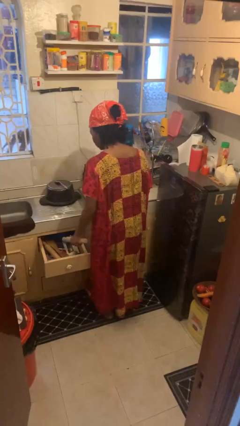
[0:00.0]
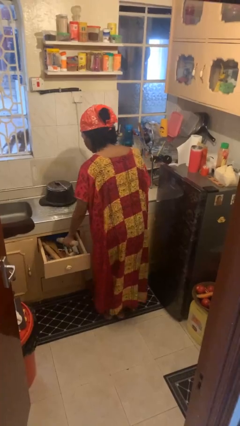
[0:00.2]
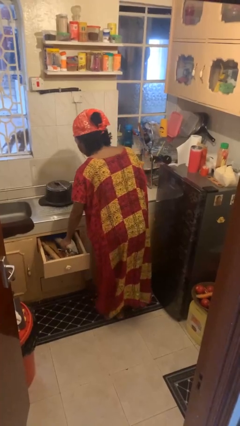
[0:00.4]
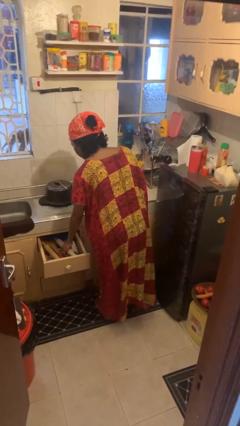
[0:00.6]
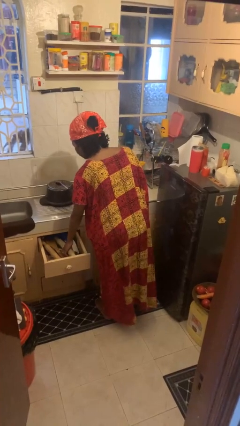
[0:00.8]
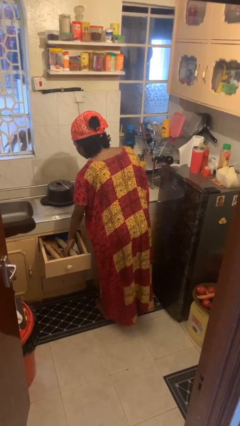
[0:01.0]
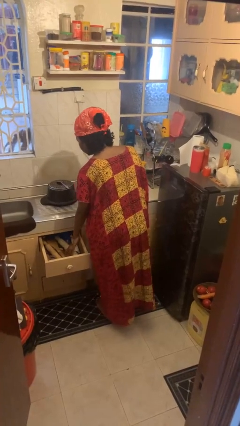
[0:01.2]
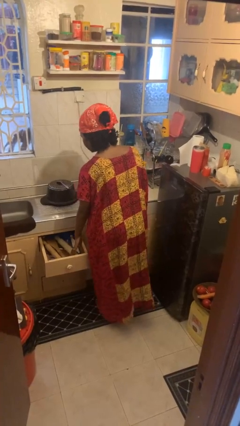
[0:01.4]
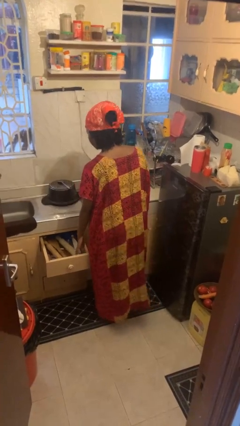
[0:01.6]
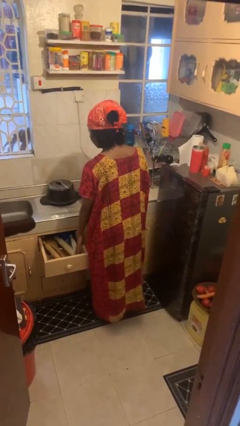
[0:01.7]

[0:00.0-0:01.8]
person puts object into kitchen drawer

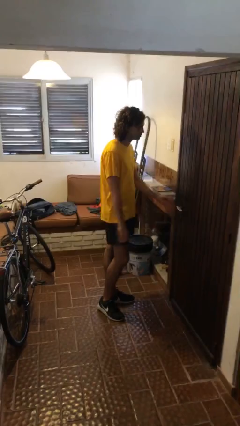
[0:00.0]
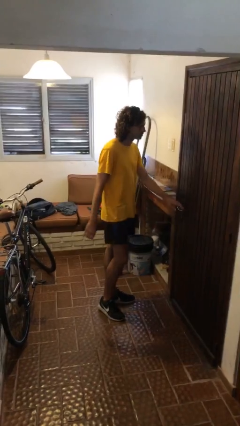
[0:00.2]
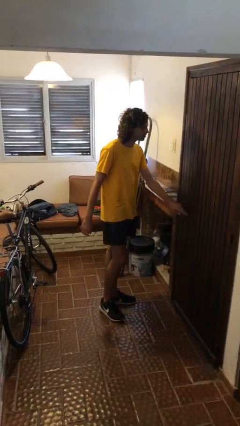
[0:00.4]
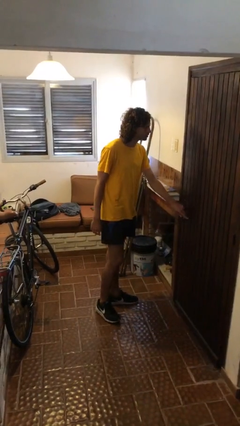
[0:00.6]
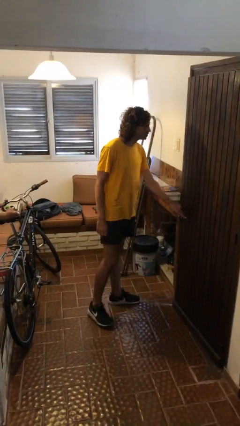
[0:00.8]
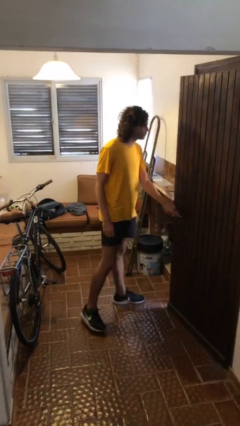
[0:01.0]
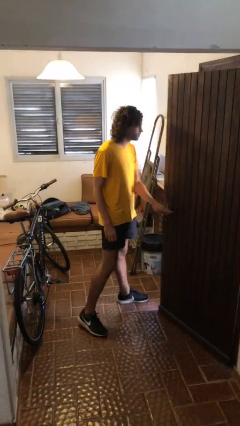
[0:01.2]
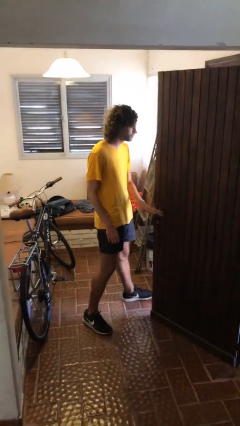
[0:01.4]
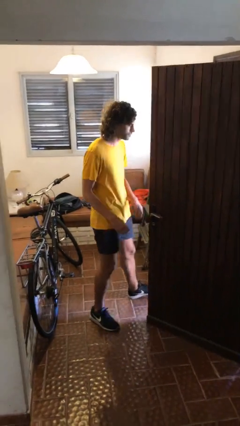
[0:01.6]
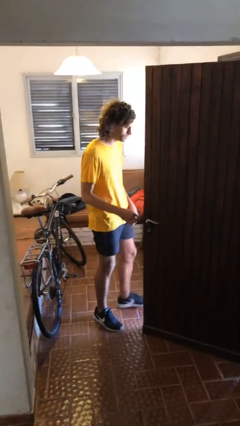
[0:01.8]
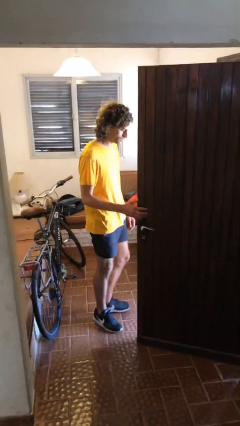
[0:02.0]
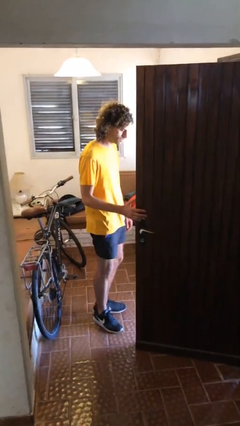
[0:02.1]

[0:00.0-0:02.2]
person opens facility door

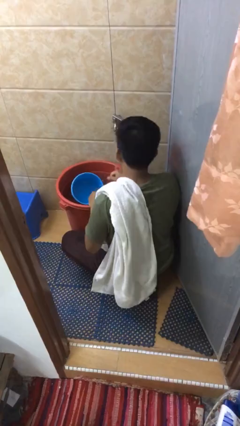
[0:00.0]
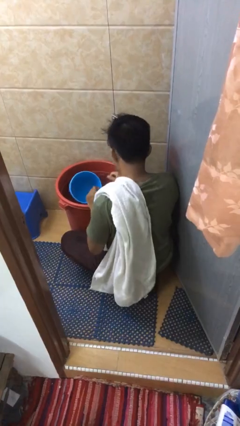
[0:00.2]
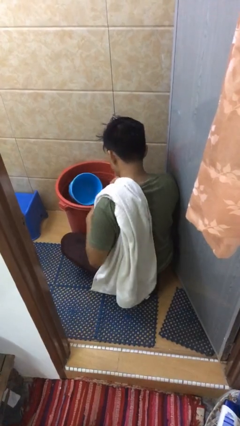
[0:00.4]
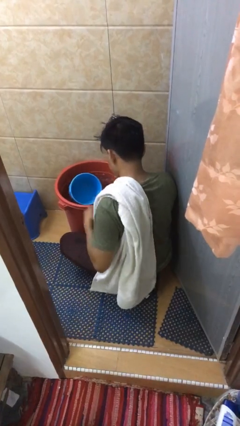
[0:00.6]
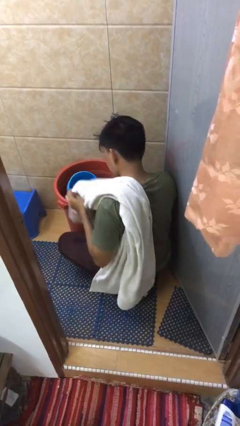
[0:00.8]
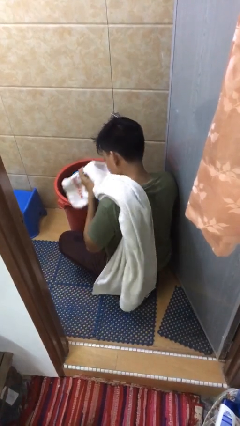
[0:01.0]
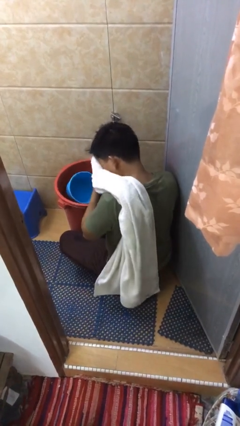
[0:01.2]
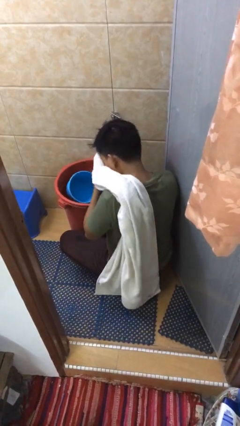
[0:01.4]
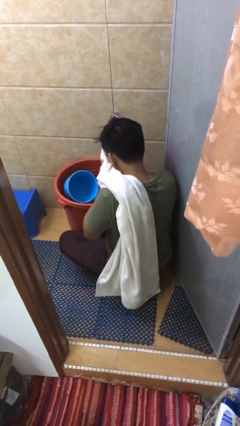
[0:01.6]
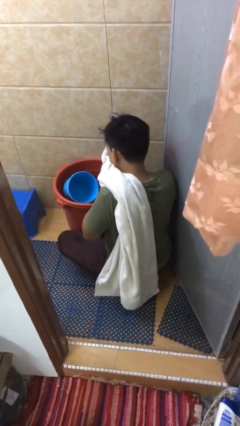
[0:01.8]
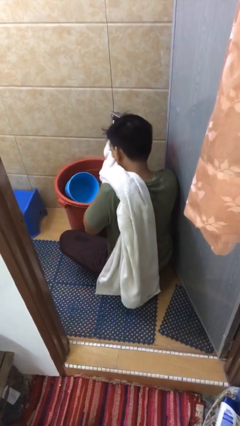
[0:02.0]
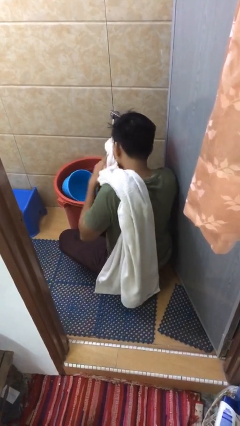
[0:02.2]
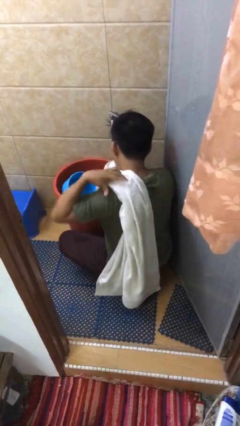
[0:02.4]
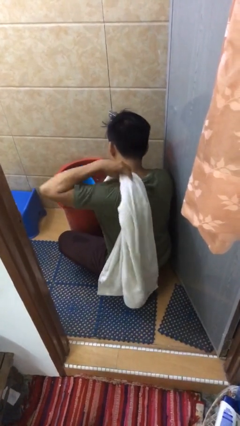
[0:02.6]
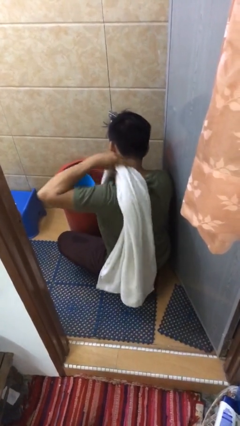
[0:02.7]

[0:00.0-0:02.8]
person dries face with towel

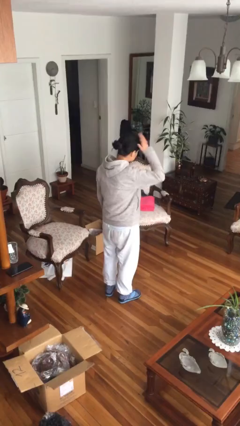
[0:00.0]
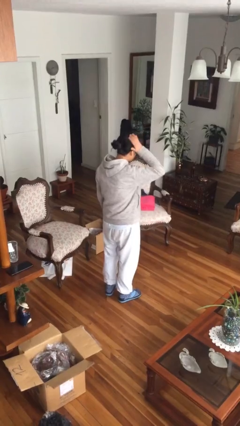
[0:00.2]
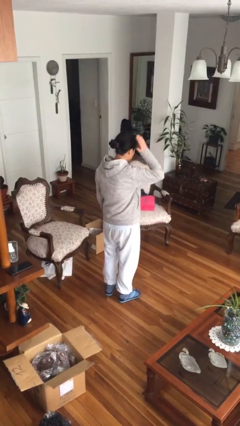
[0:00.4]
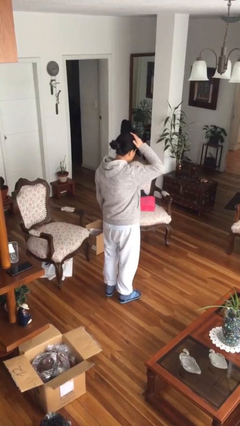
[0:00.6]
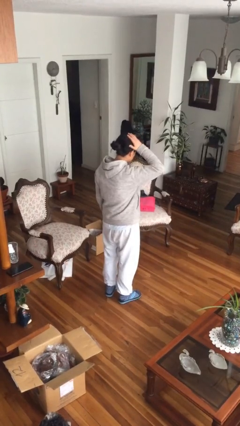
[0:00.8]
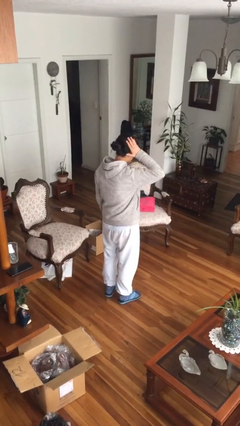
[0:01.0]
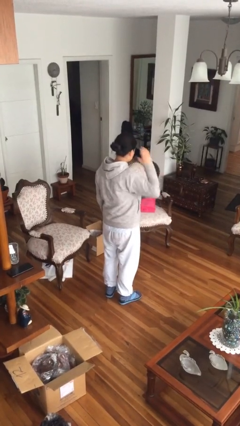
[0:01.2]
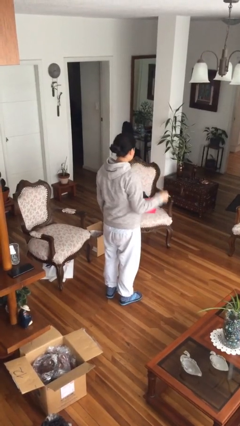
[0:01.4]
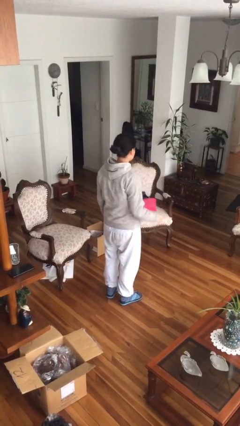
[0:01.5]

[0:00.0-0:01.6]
person pats head

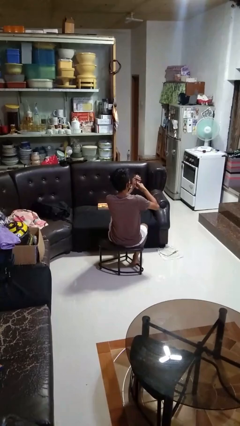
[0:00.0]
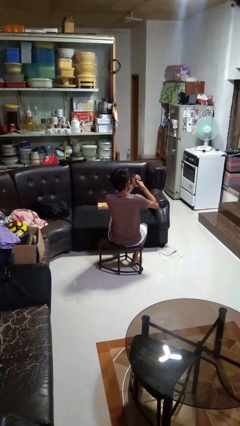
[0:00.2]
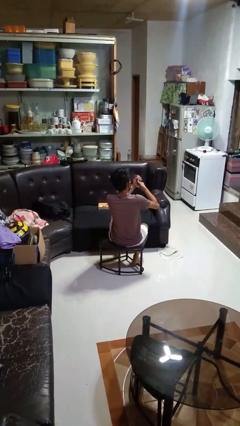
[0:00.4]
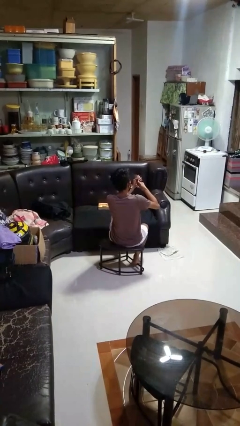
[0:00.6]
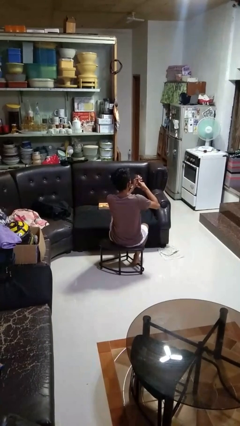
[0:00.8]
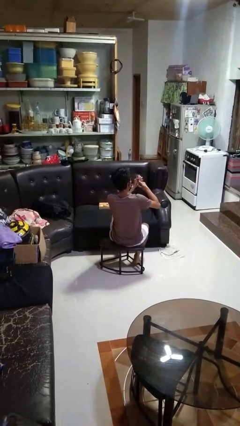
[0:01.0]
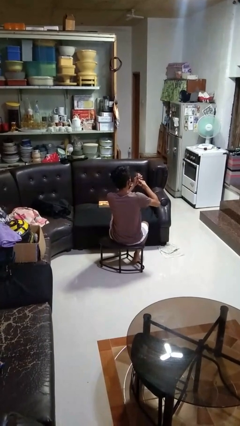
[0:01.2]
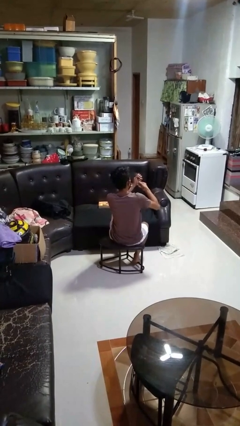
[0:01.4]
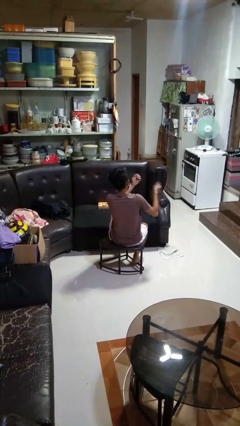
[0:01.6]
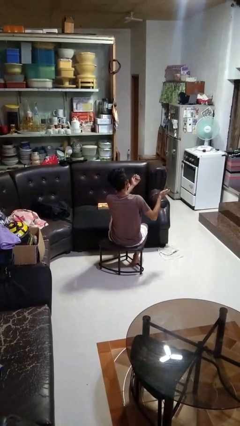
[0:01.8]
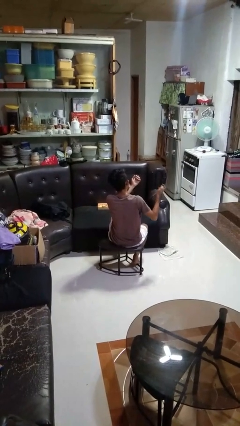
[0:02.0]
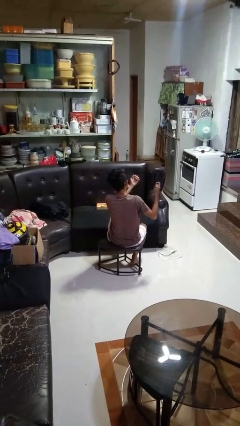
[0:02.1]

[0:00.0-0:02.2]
person clips fingernails

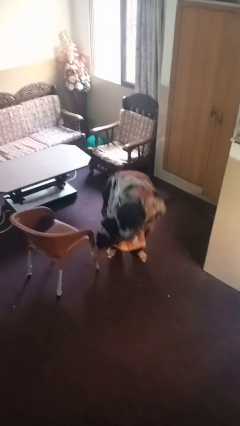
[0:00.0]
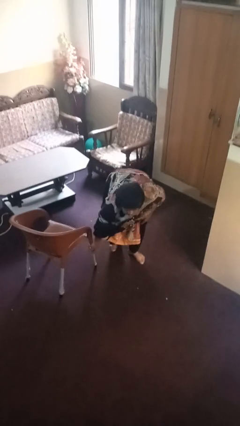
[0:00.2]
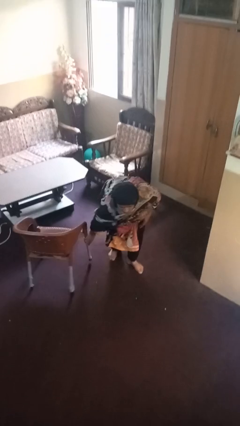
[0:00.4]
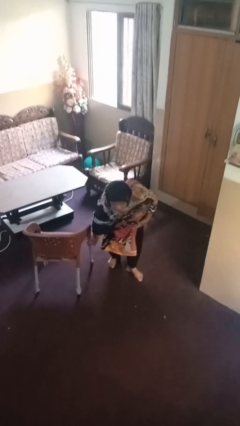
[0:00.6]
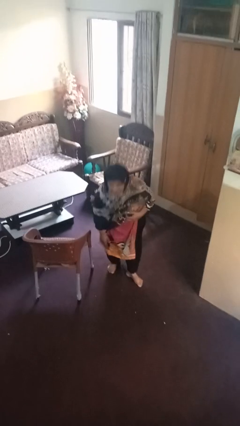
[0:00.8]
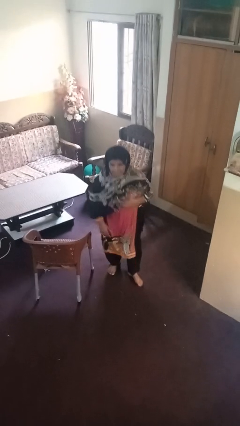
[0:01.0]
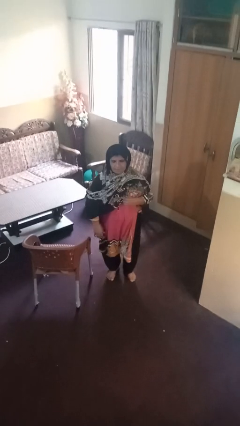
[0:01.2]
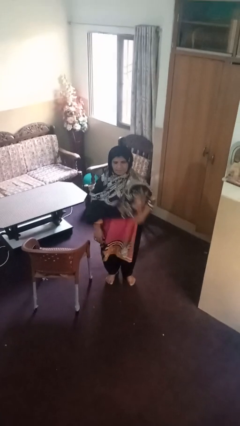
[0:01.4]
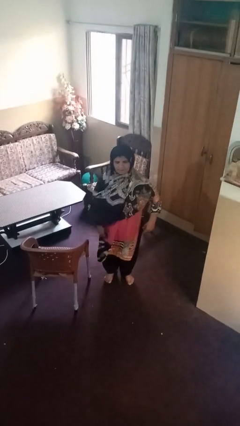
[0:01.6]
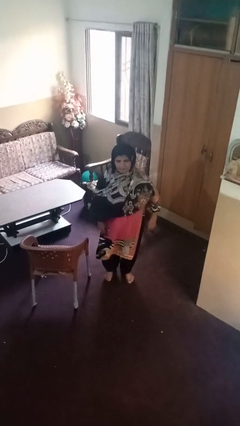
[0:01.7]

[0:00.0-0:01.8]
person stands up from floor

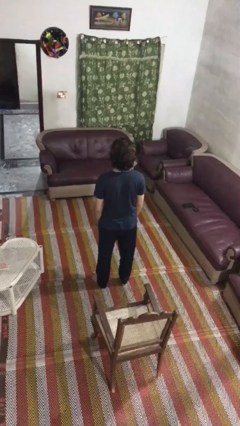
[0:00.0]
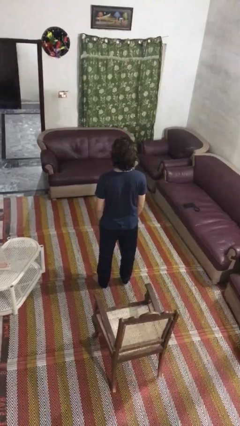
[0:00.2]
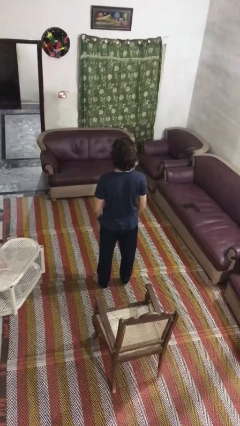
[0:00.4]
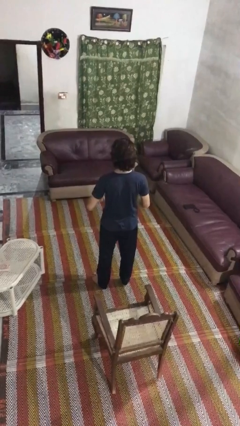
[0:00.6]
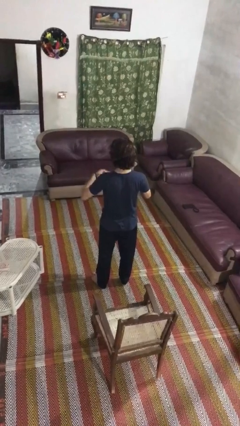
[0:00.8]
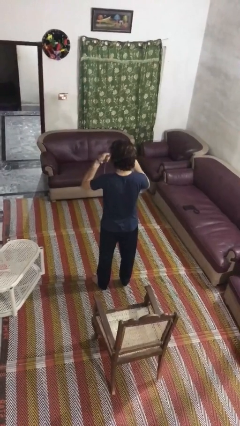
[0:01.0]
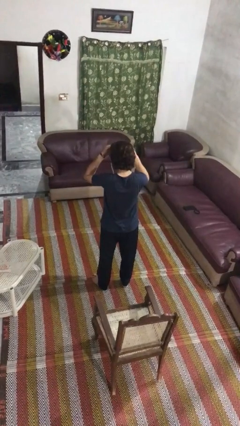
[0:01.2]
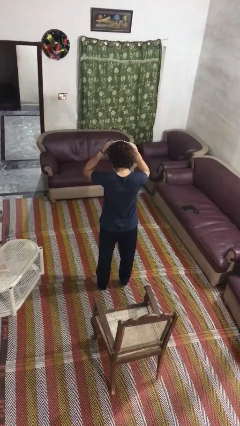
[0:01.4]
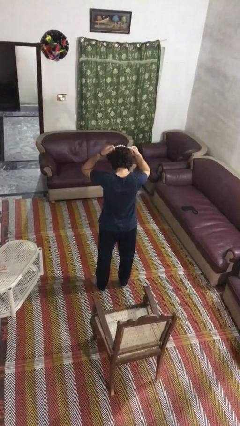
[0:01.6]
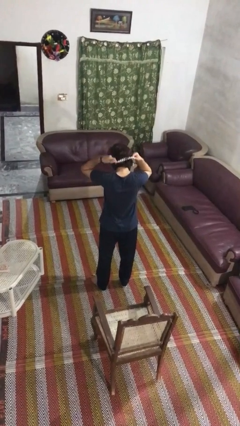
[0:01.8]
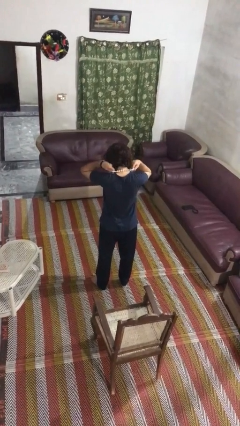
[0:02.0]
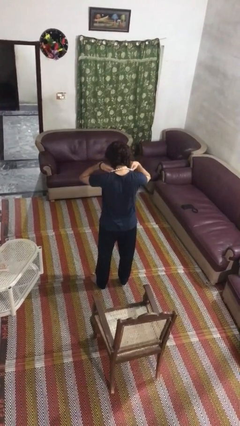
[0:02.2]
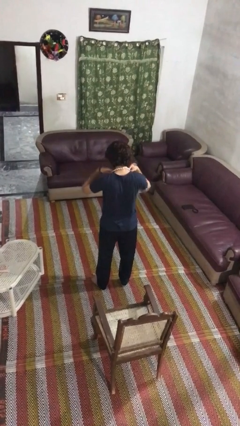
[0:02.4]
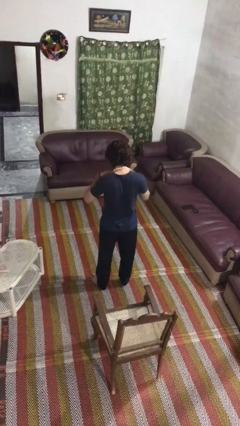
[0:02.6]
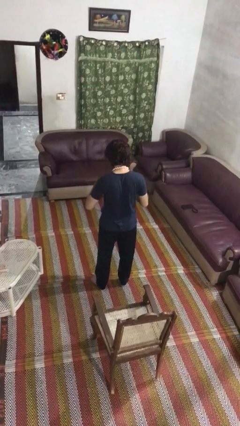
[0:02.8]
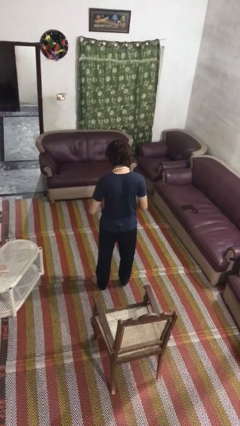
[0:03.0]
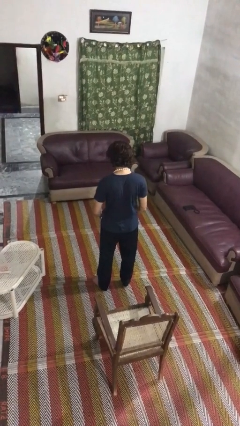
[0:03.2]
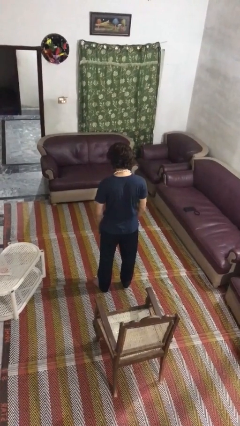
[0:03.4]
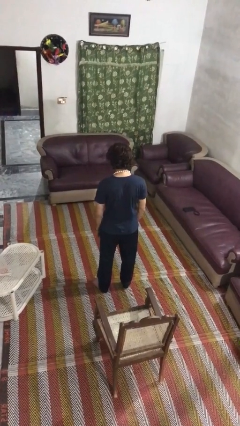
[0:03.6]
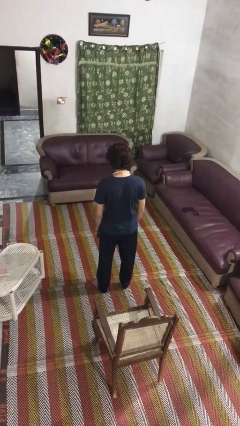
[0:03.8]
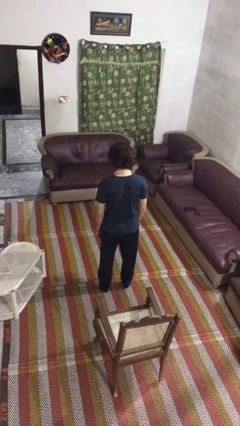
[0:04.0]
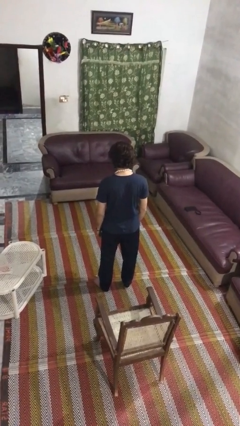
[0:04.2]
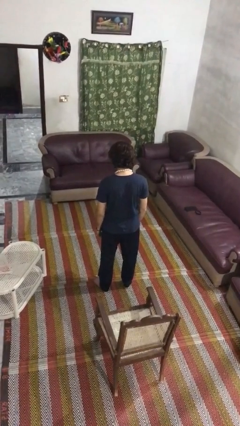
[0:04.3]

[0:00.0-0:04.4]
person puts on necklace

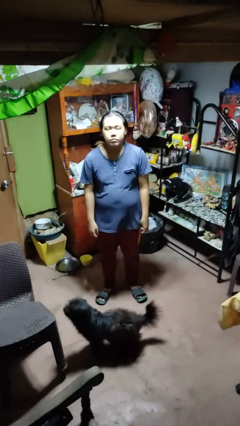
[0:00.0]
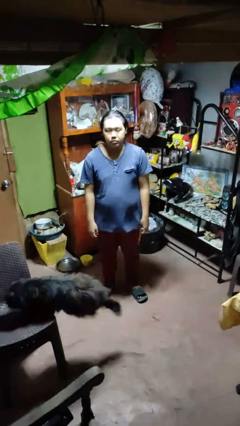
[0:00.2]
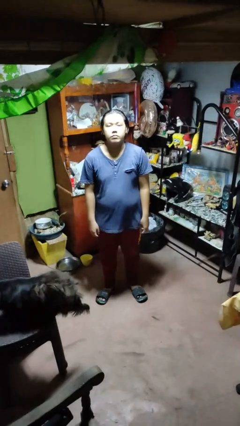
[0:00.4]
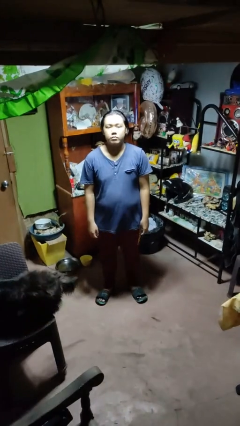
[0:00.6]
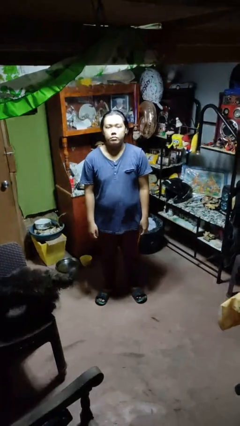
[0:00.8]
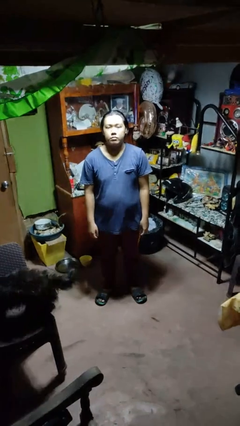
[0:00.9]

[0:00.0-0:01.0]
person nods head
